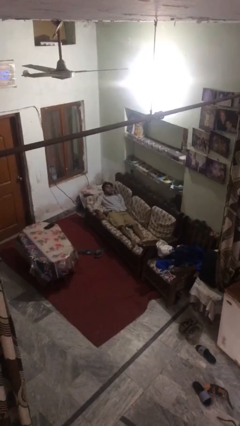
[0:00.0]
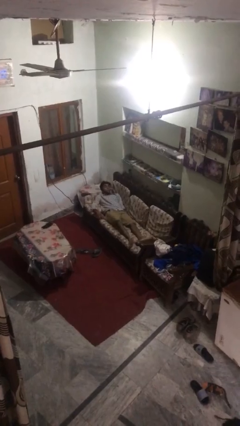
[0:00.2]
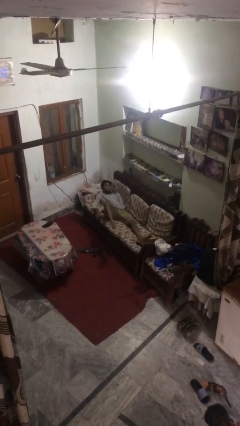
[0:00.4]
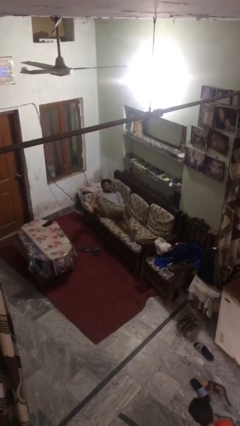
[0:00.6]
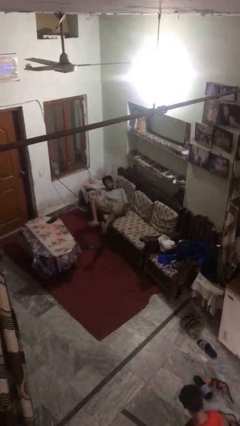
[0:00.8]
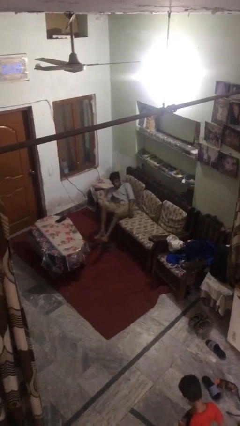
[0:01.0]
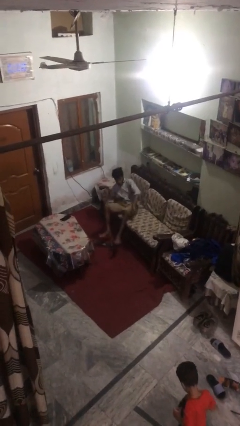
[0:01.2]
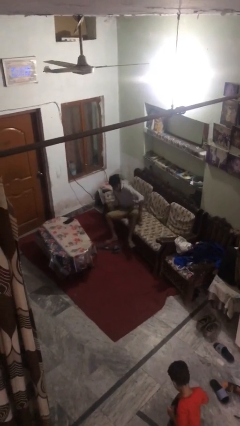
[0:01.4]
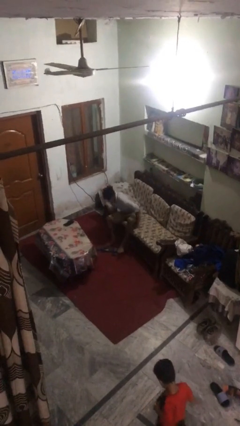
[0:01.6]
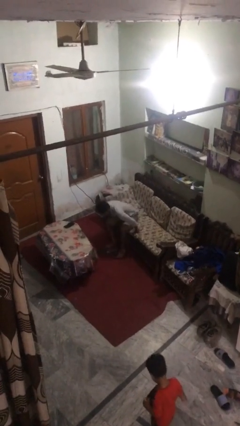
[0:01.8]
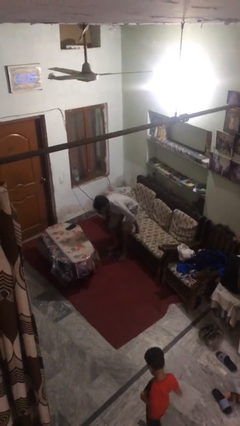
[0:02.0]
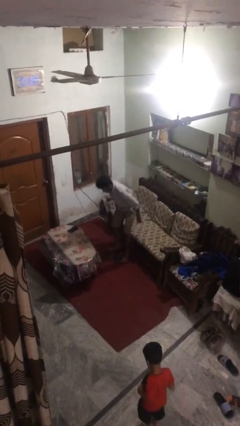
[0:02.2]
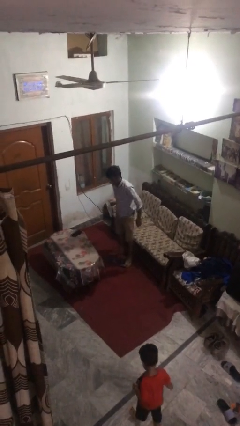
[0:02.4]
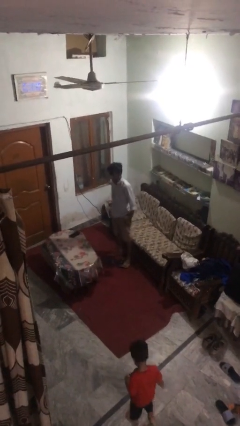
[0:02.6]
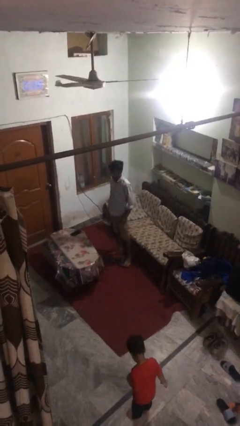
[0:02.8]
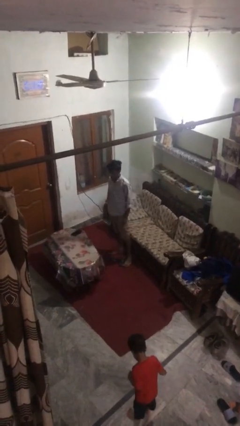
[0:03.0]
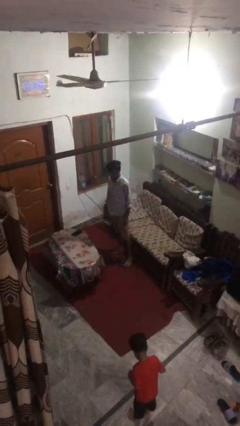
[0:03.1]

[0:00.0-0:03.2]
person stands up

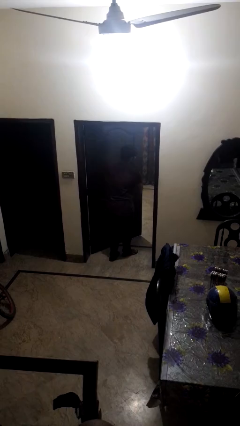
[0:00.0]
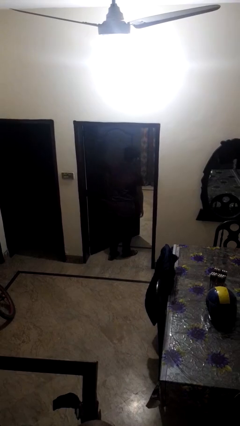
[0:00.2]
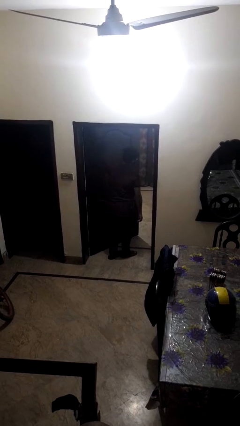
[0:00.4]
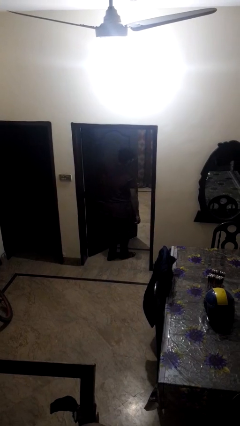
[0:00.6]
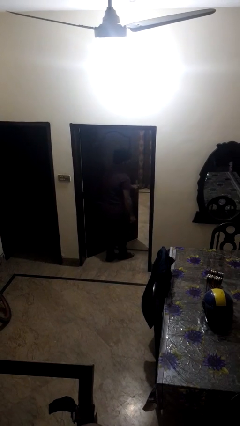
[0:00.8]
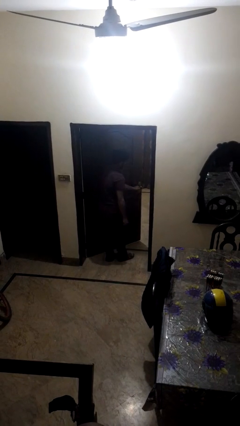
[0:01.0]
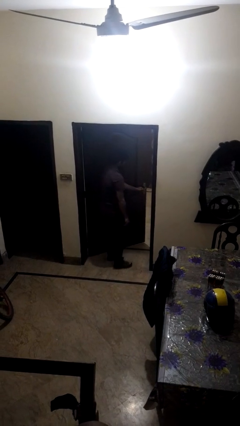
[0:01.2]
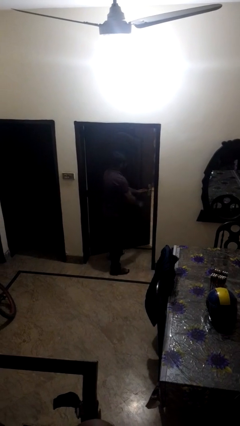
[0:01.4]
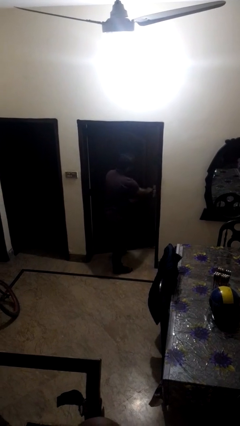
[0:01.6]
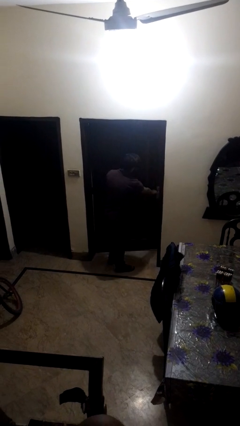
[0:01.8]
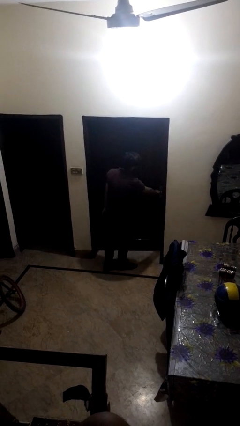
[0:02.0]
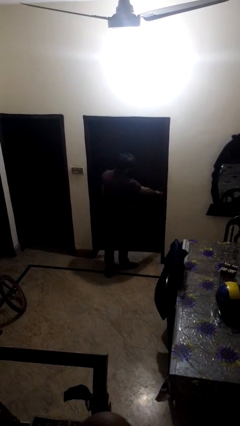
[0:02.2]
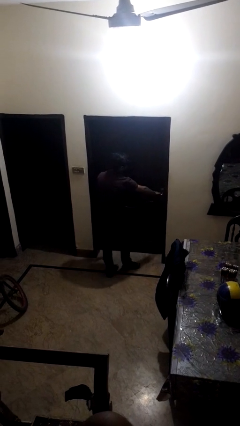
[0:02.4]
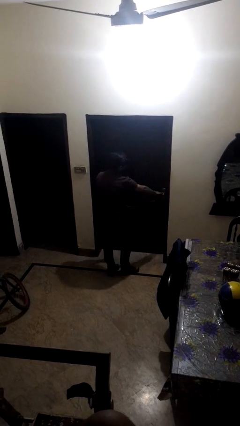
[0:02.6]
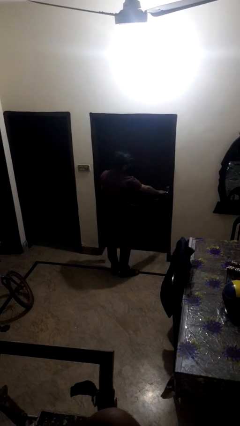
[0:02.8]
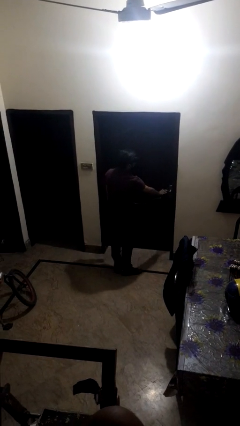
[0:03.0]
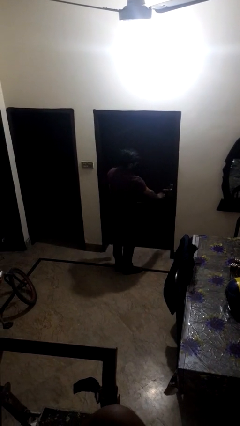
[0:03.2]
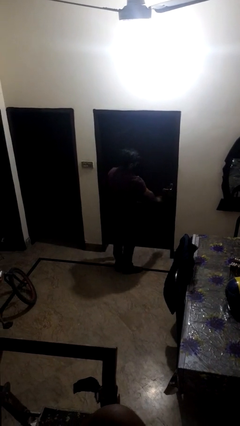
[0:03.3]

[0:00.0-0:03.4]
person closes facility door

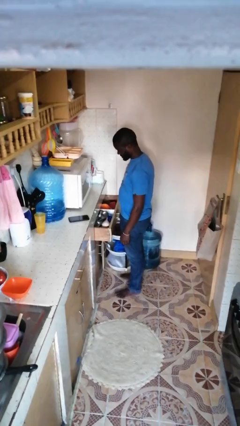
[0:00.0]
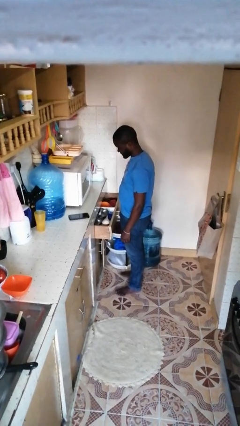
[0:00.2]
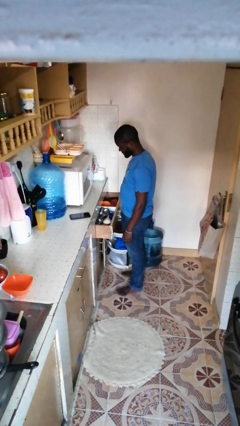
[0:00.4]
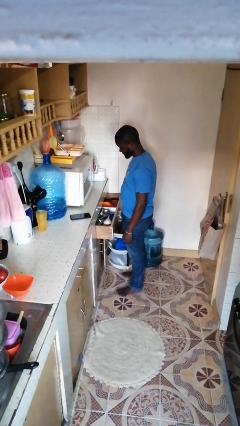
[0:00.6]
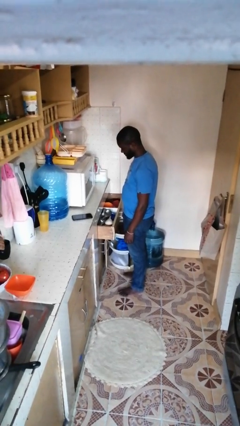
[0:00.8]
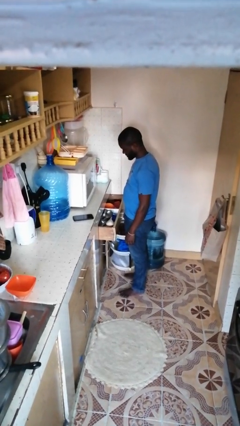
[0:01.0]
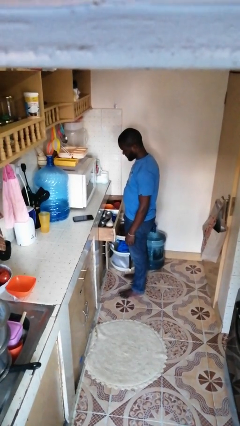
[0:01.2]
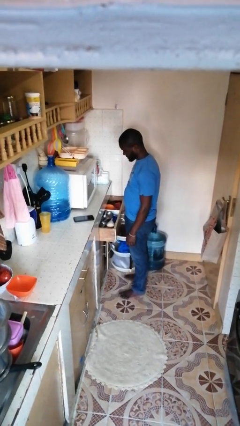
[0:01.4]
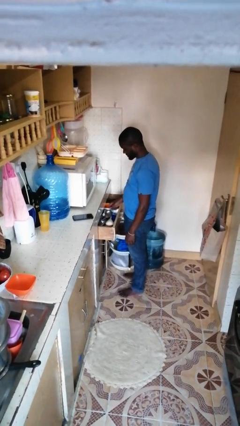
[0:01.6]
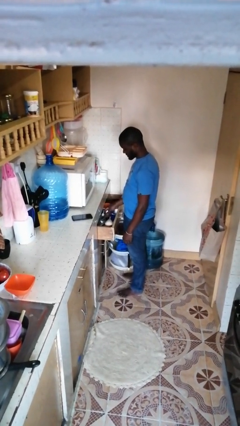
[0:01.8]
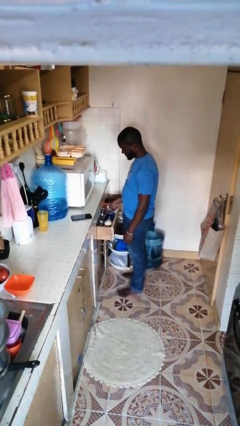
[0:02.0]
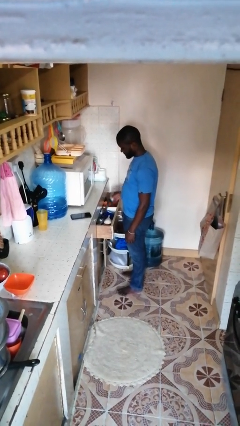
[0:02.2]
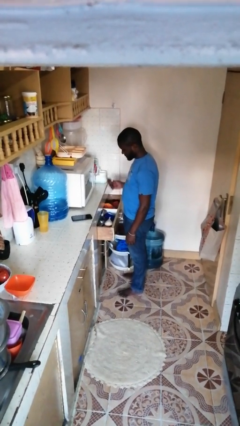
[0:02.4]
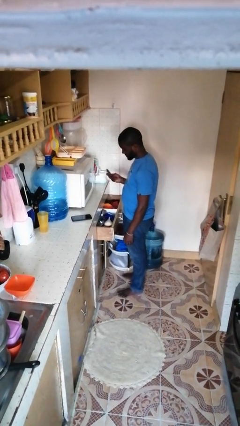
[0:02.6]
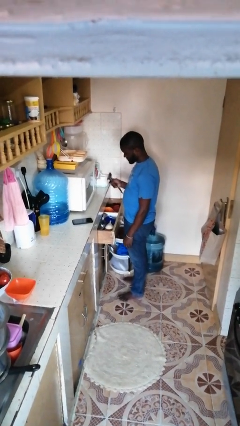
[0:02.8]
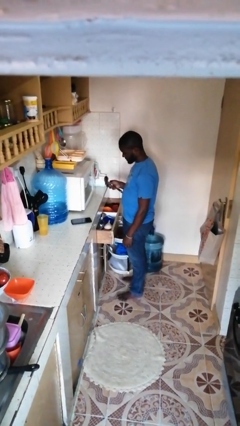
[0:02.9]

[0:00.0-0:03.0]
person takes object from kitchen drawer

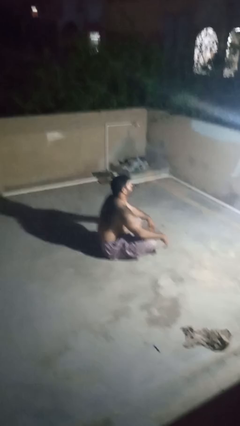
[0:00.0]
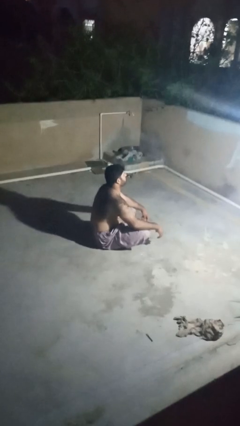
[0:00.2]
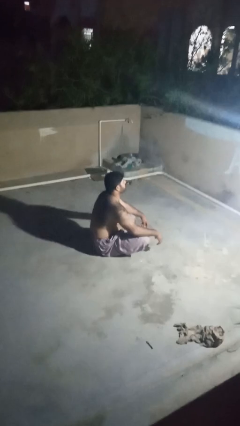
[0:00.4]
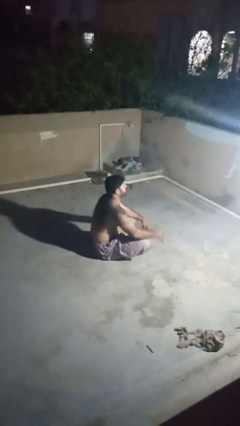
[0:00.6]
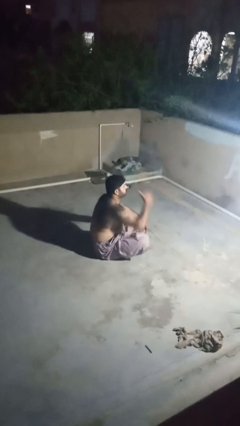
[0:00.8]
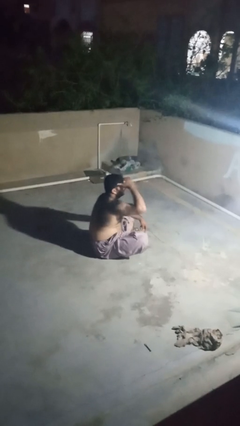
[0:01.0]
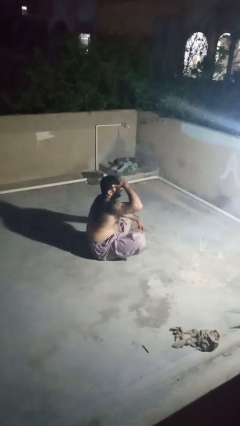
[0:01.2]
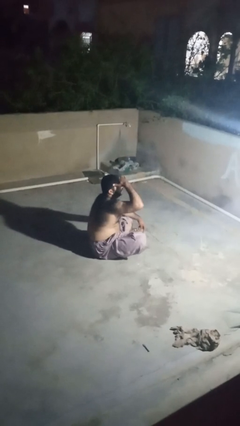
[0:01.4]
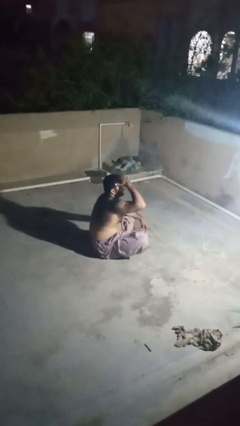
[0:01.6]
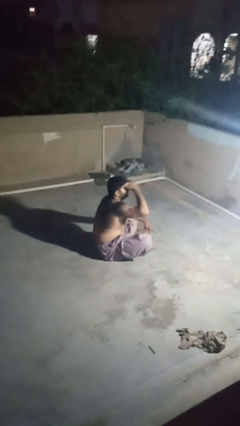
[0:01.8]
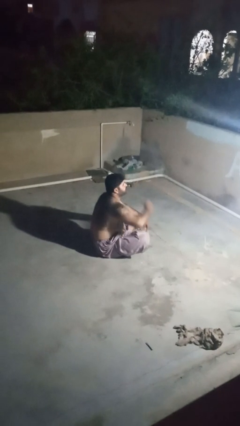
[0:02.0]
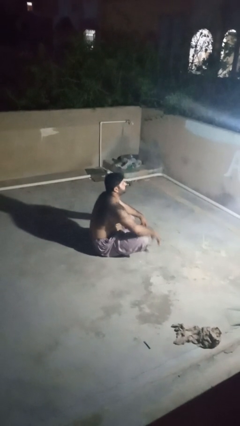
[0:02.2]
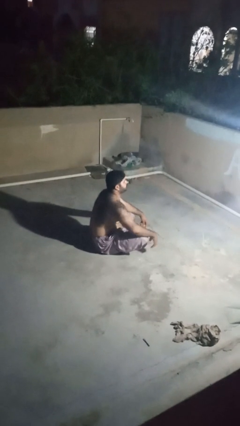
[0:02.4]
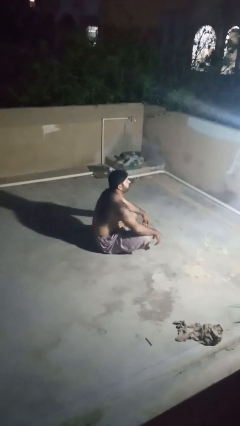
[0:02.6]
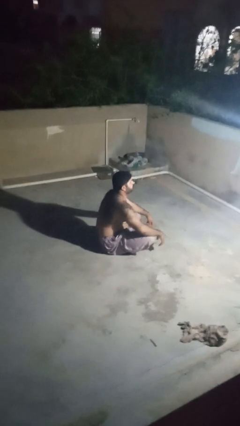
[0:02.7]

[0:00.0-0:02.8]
person shades eyes

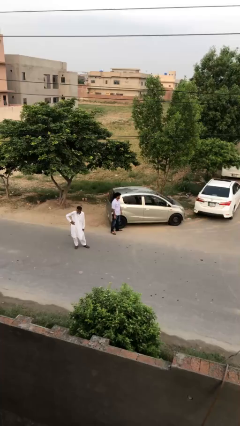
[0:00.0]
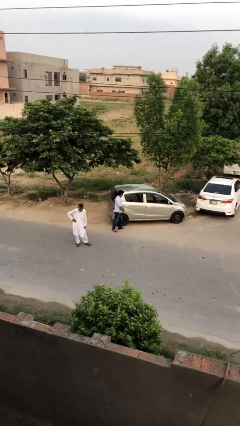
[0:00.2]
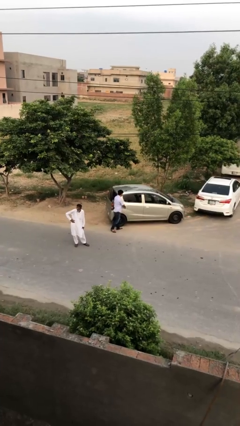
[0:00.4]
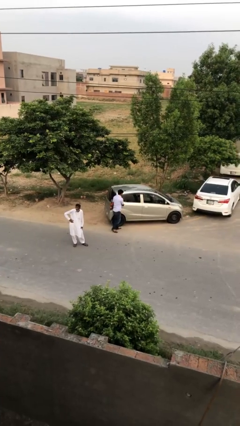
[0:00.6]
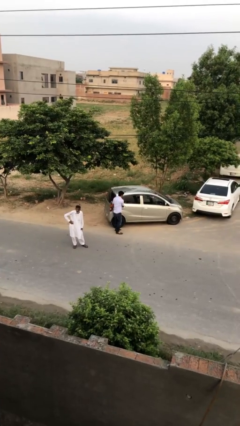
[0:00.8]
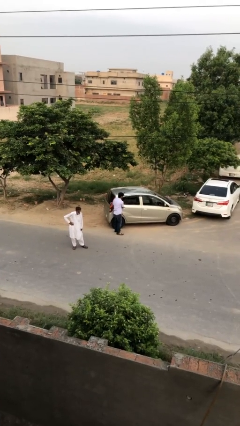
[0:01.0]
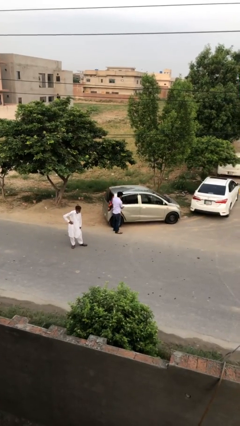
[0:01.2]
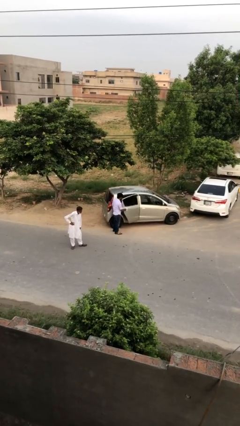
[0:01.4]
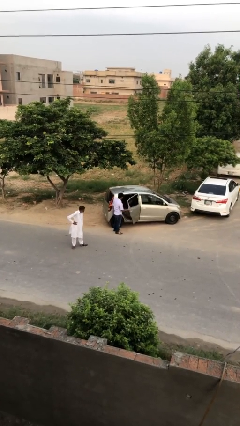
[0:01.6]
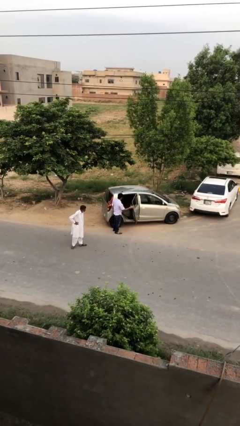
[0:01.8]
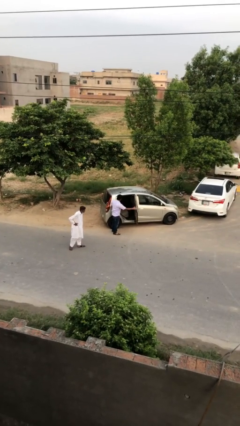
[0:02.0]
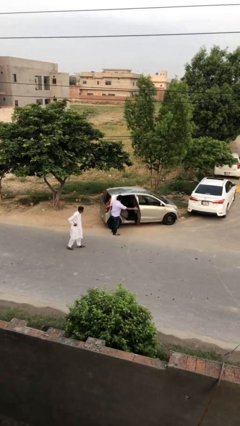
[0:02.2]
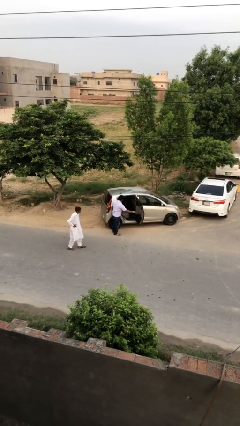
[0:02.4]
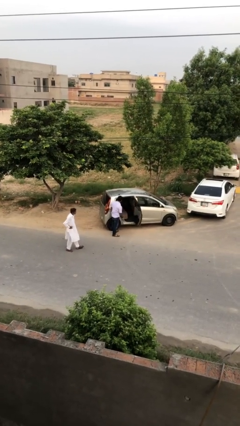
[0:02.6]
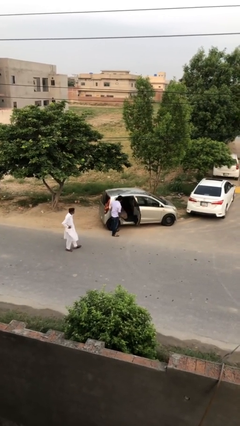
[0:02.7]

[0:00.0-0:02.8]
person opens car door

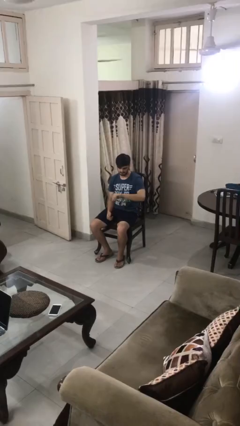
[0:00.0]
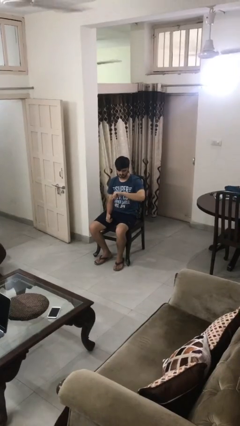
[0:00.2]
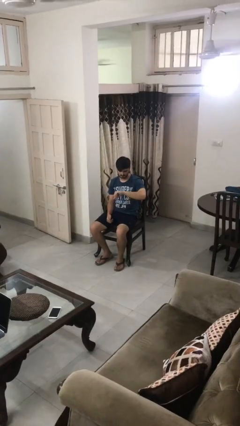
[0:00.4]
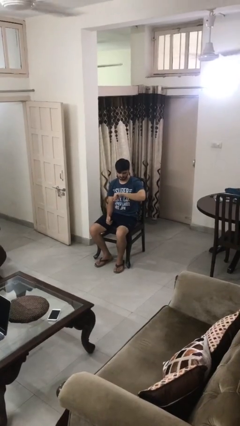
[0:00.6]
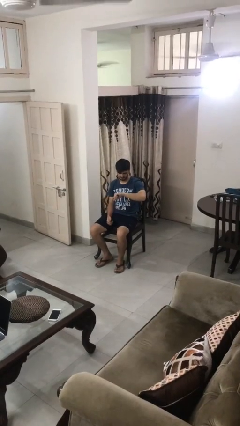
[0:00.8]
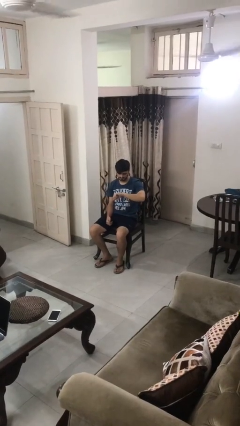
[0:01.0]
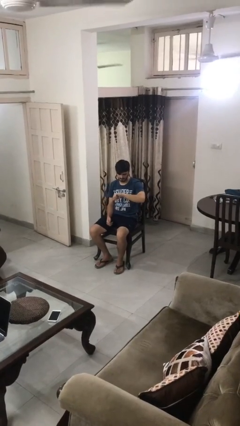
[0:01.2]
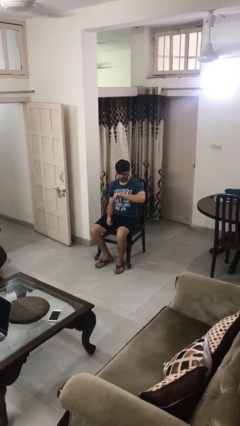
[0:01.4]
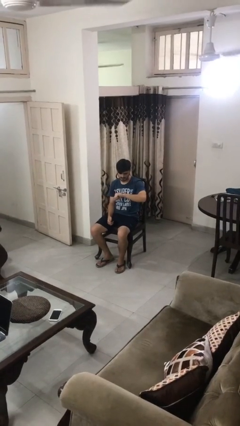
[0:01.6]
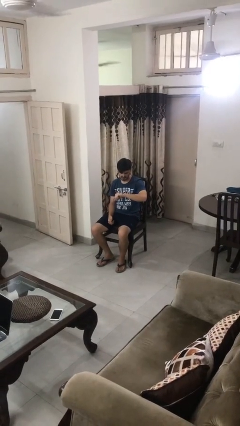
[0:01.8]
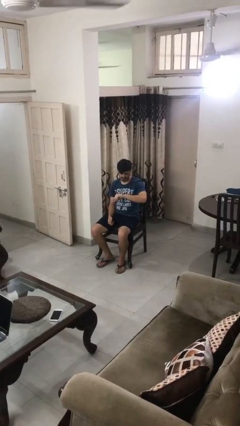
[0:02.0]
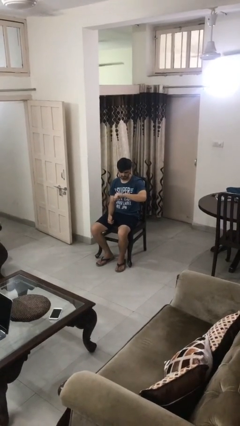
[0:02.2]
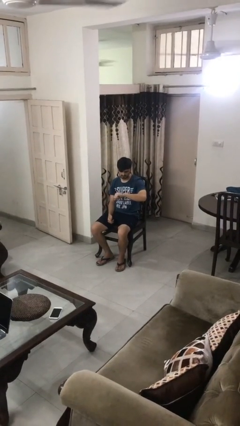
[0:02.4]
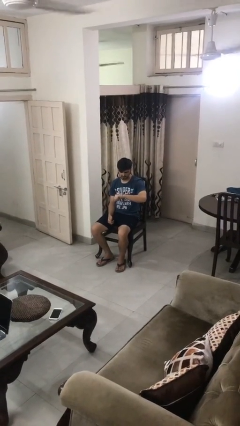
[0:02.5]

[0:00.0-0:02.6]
person looks at wristwatch
